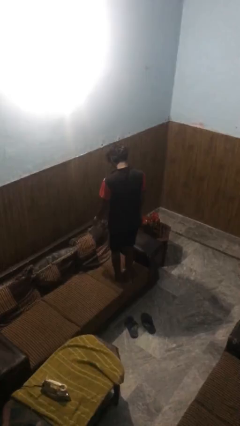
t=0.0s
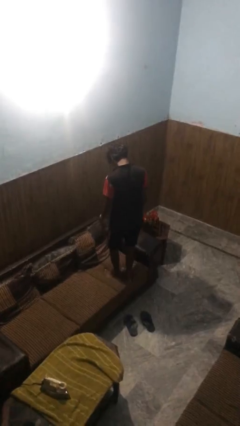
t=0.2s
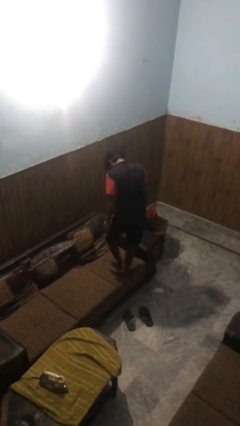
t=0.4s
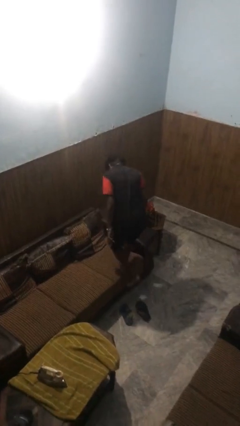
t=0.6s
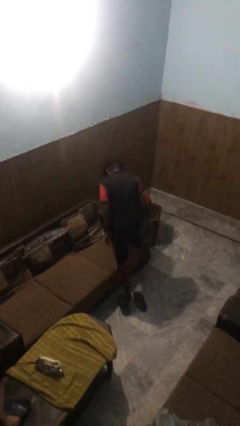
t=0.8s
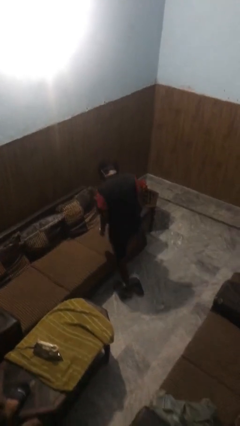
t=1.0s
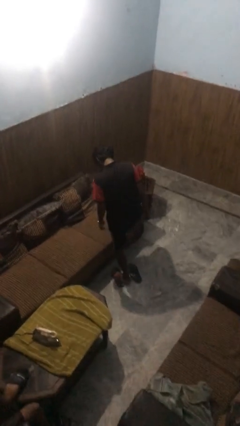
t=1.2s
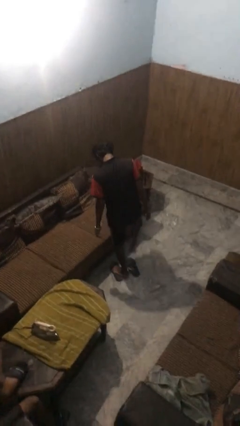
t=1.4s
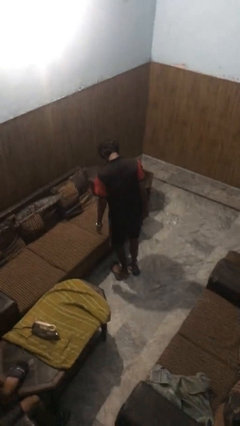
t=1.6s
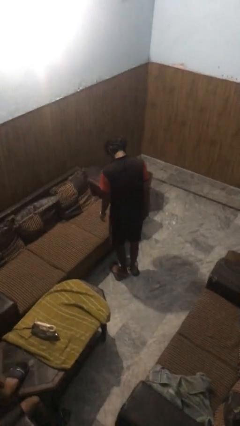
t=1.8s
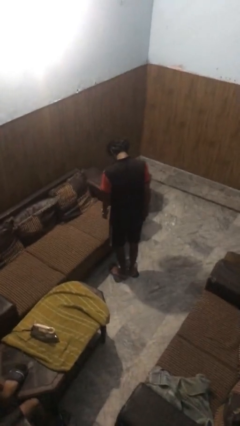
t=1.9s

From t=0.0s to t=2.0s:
person climbs off couch

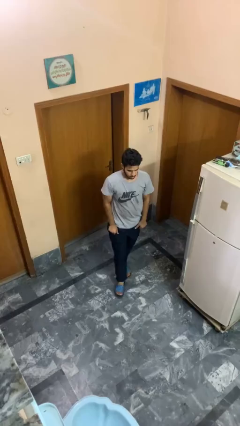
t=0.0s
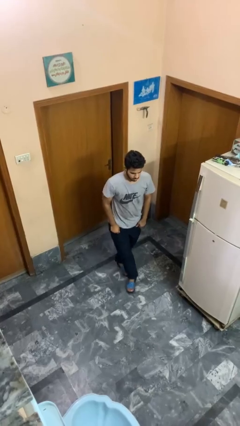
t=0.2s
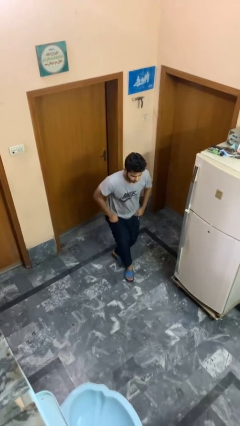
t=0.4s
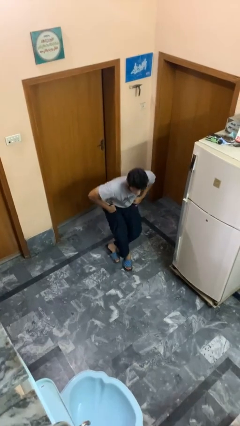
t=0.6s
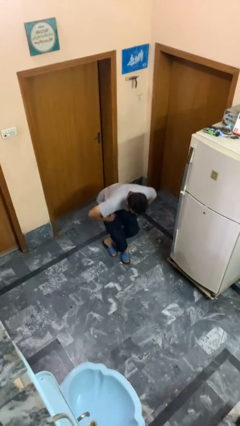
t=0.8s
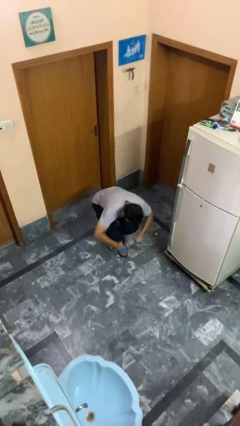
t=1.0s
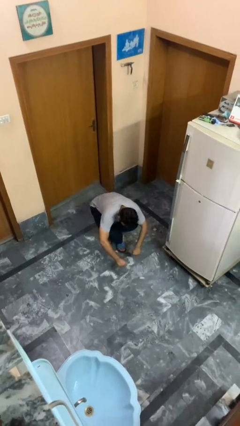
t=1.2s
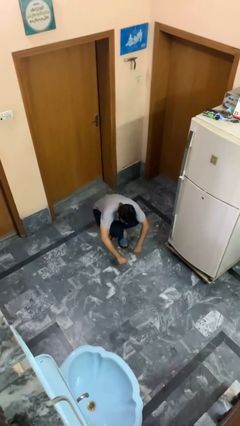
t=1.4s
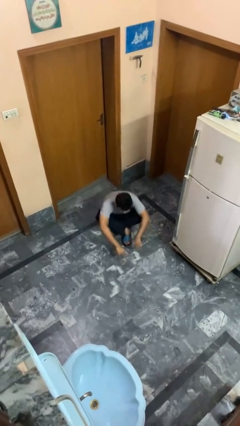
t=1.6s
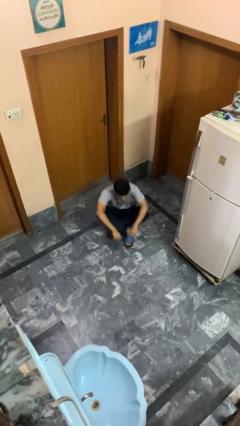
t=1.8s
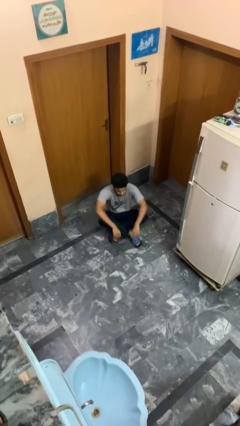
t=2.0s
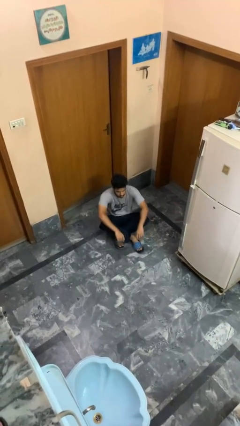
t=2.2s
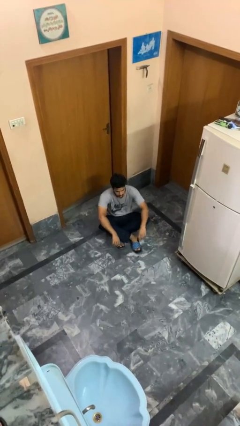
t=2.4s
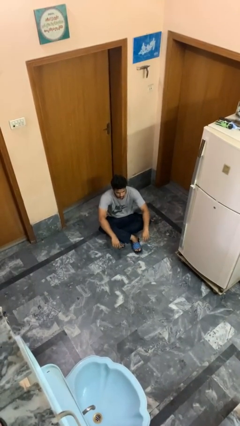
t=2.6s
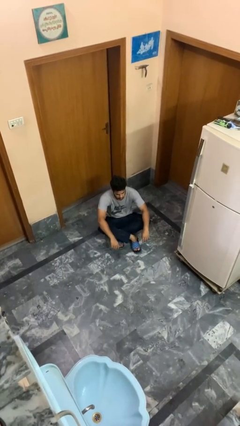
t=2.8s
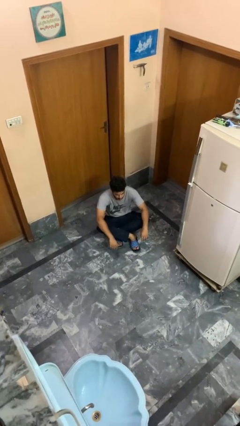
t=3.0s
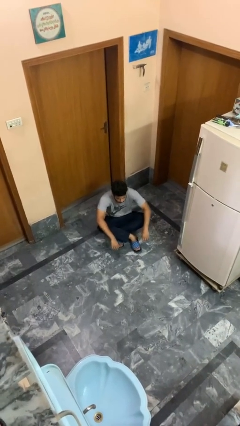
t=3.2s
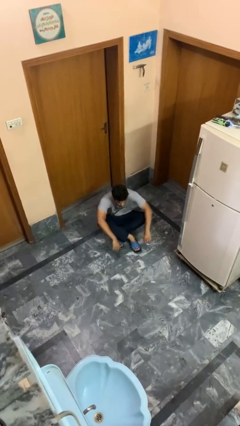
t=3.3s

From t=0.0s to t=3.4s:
person sits crisscross

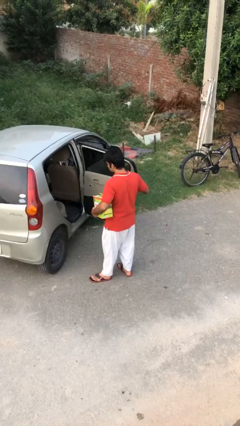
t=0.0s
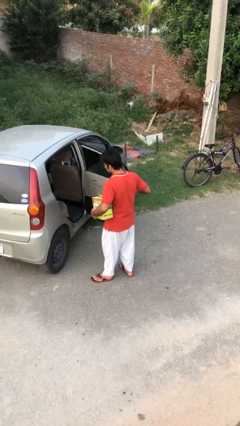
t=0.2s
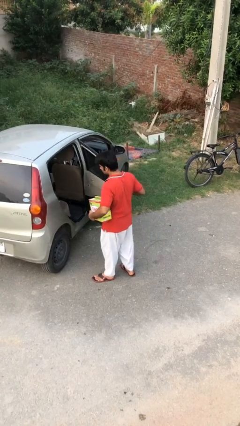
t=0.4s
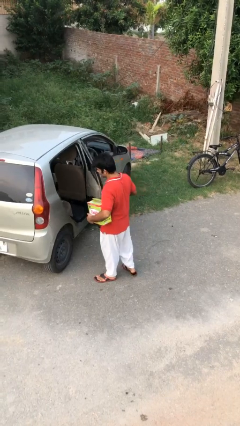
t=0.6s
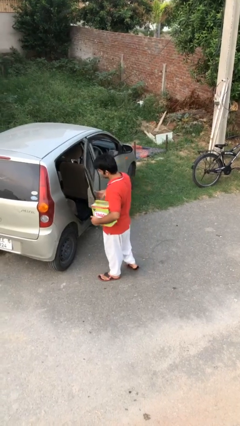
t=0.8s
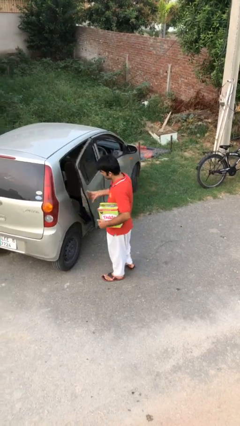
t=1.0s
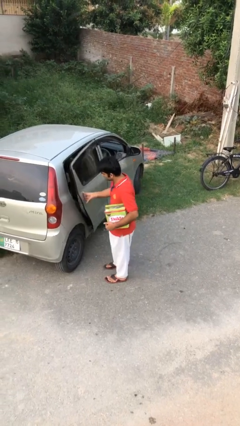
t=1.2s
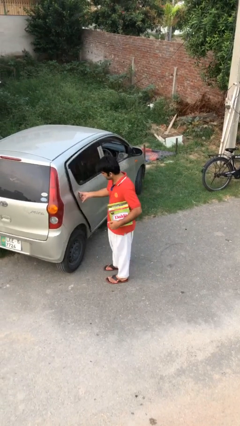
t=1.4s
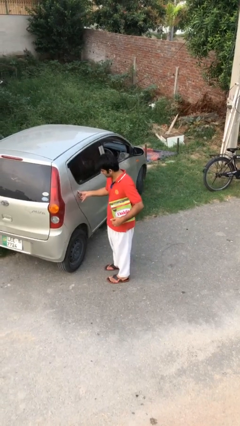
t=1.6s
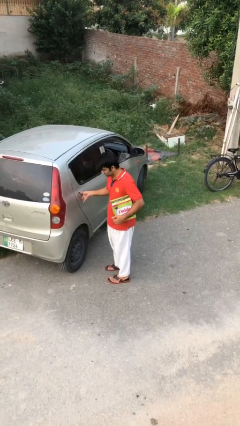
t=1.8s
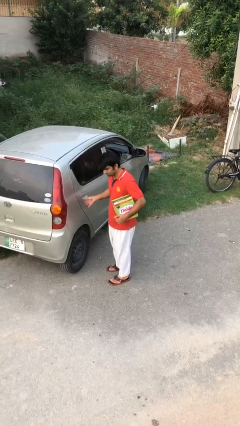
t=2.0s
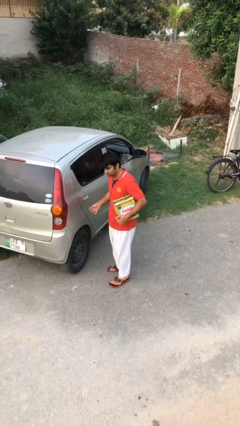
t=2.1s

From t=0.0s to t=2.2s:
person closes car door

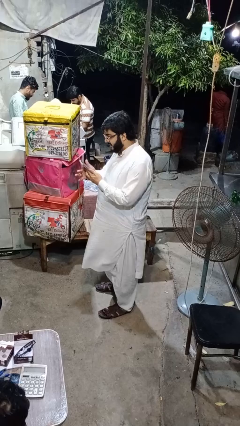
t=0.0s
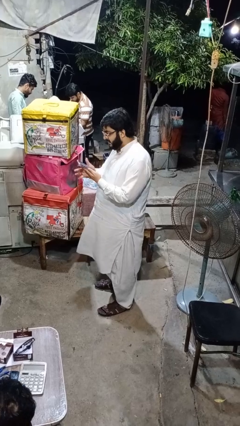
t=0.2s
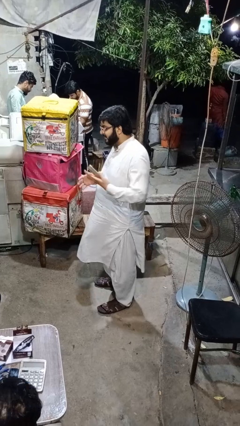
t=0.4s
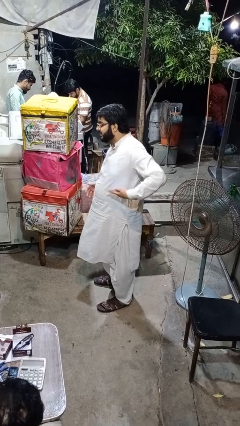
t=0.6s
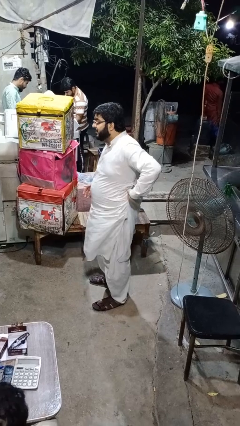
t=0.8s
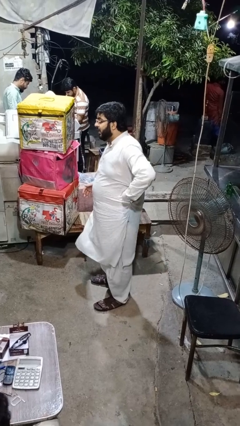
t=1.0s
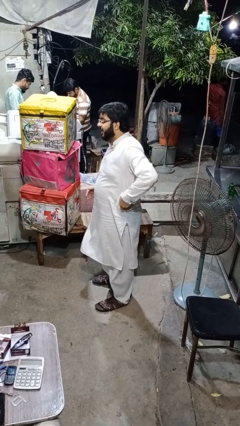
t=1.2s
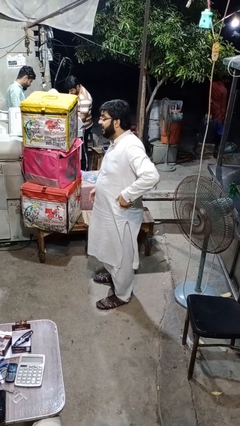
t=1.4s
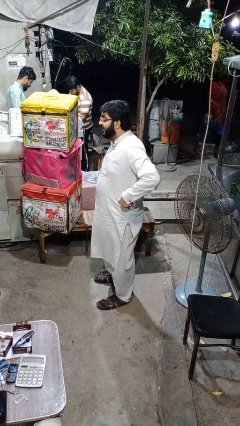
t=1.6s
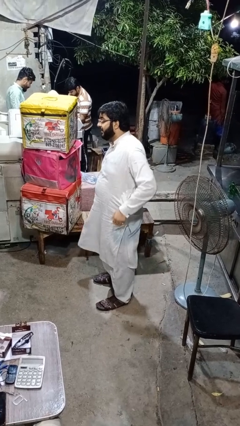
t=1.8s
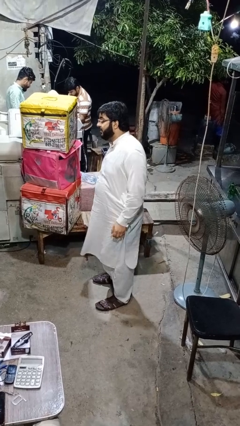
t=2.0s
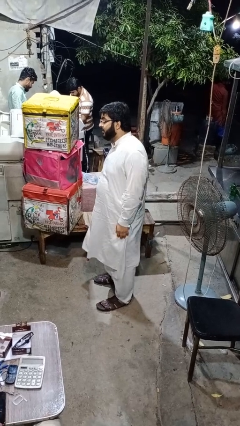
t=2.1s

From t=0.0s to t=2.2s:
person puts phone into pocket

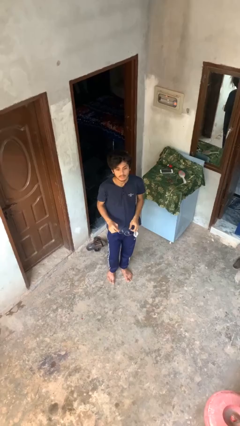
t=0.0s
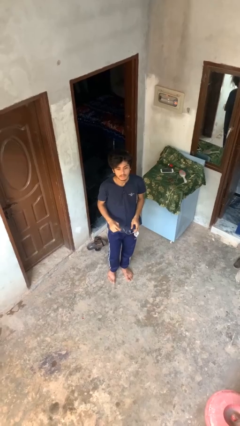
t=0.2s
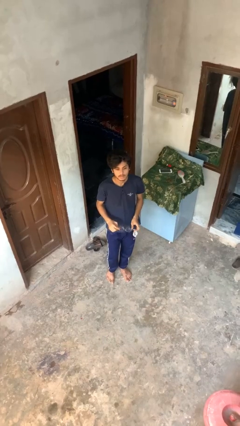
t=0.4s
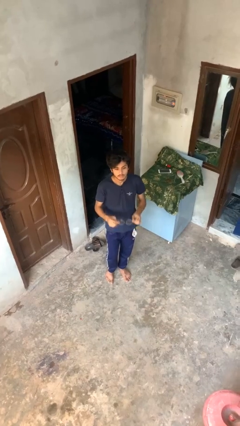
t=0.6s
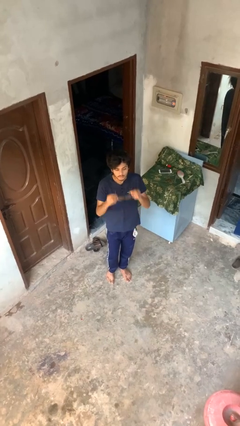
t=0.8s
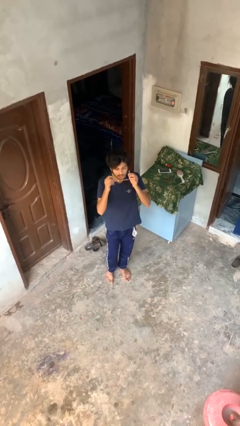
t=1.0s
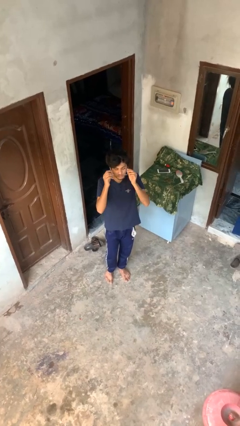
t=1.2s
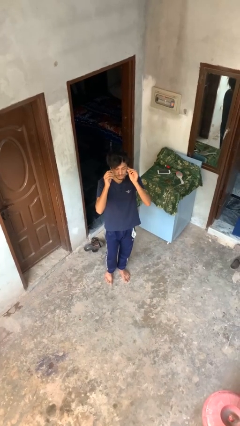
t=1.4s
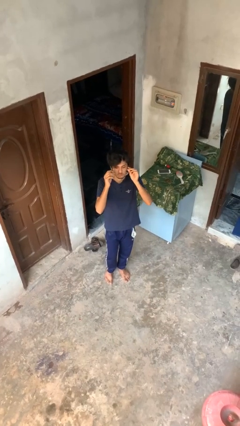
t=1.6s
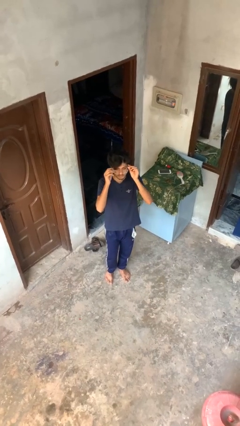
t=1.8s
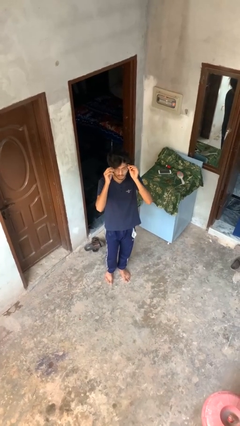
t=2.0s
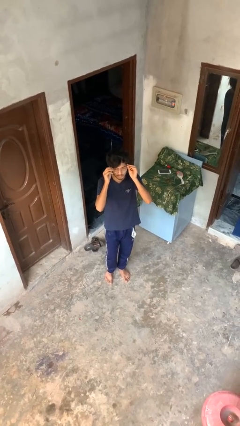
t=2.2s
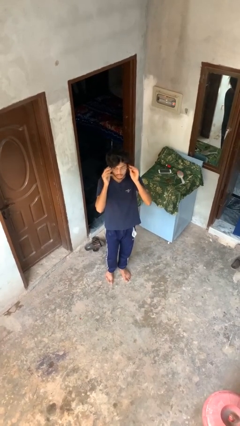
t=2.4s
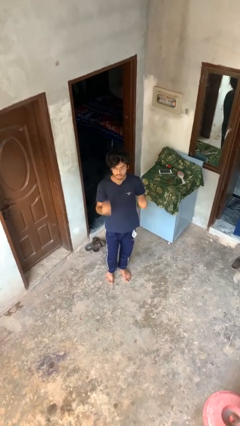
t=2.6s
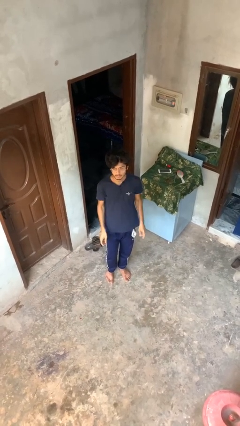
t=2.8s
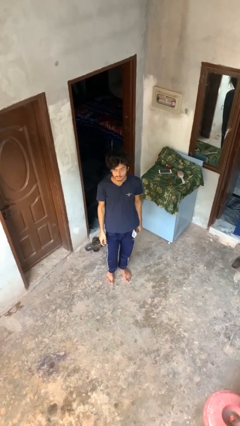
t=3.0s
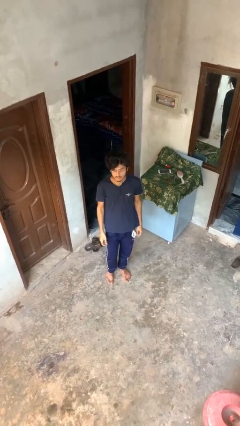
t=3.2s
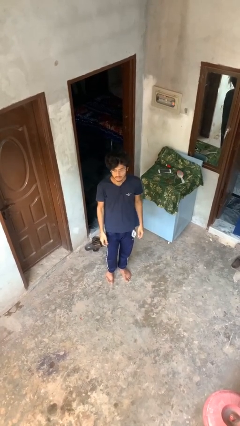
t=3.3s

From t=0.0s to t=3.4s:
person puts on glasses

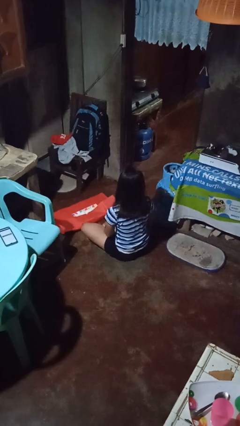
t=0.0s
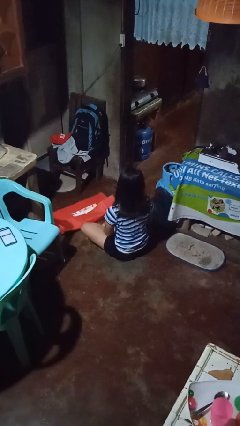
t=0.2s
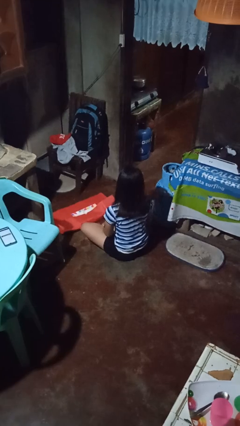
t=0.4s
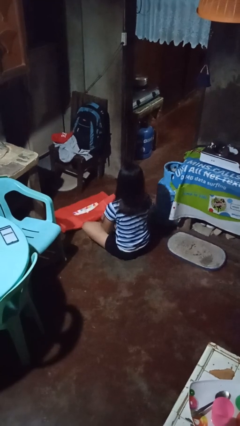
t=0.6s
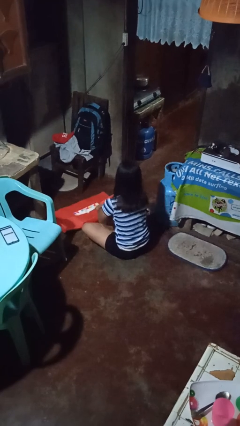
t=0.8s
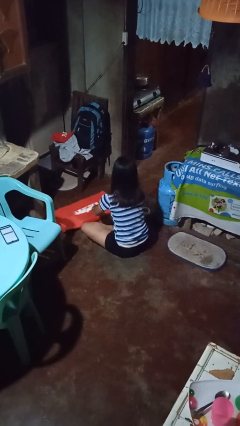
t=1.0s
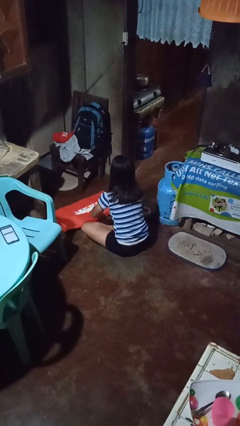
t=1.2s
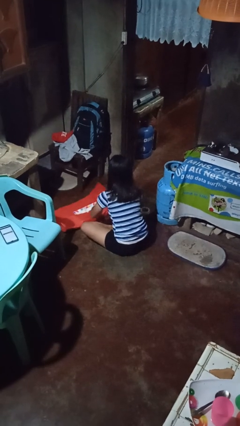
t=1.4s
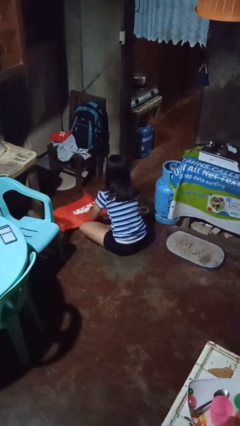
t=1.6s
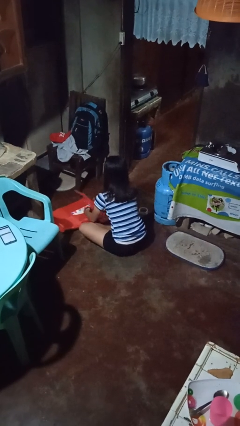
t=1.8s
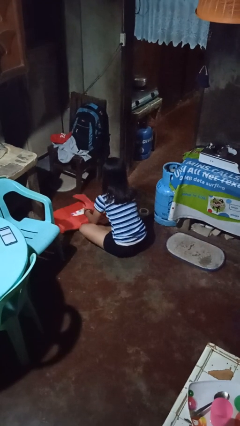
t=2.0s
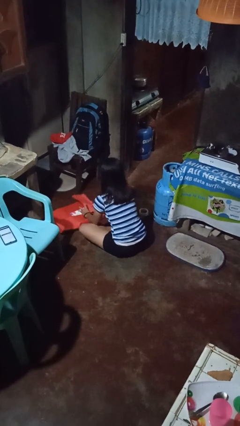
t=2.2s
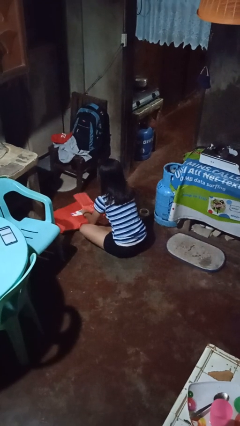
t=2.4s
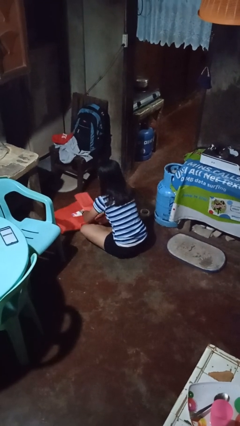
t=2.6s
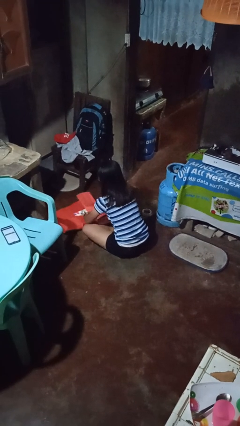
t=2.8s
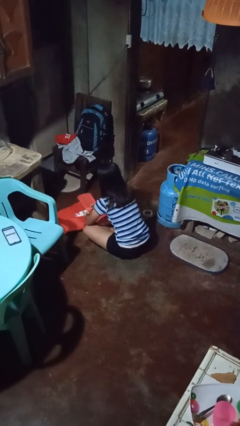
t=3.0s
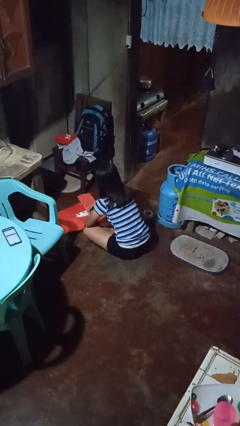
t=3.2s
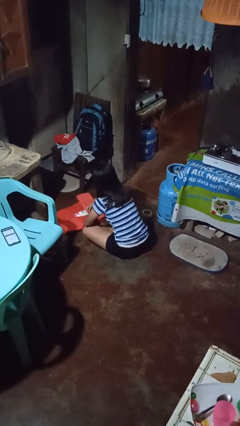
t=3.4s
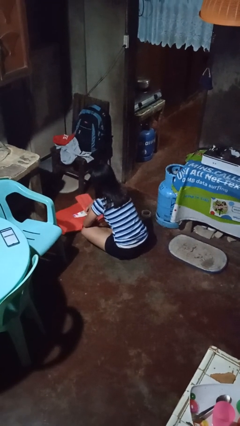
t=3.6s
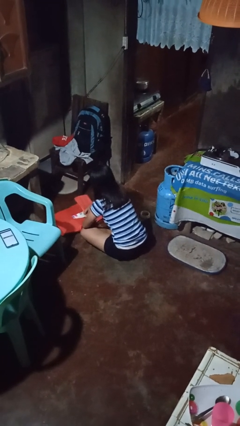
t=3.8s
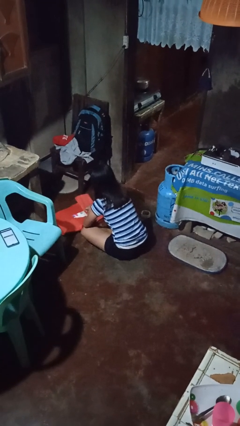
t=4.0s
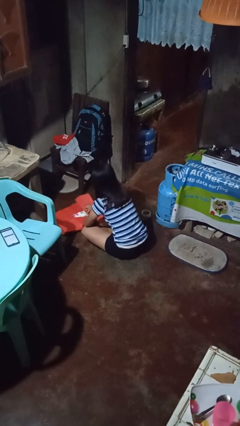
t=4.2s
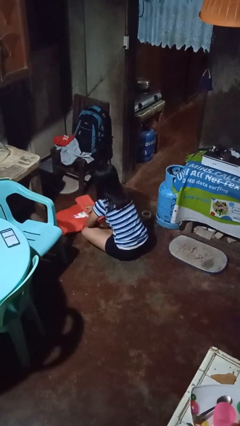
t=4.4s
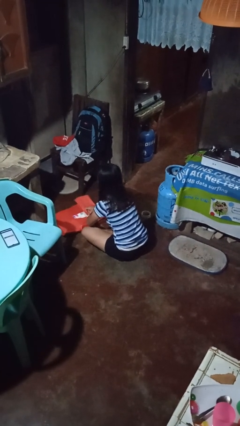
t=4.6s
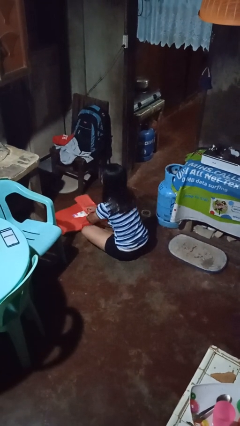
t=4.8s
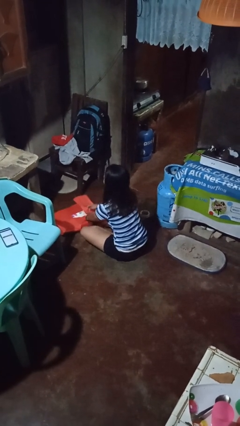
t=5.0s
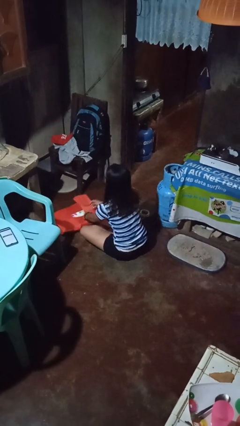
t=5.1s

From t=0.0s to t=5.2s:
person wraps box
